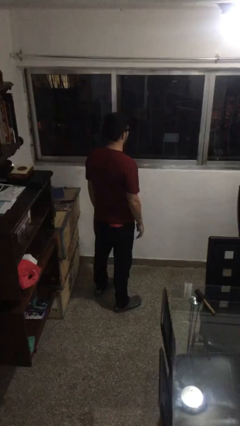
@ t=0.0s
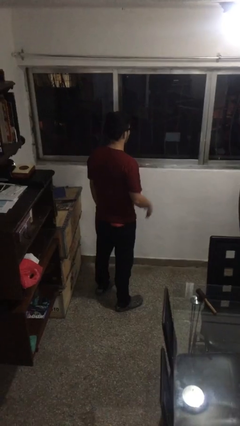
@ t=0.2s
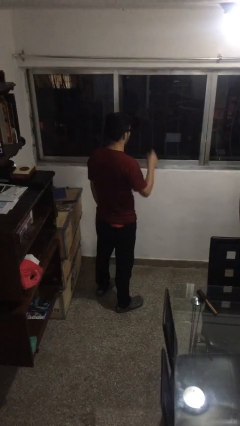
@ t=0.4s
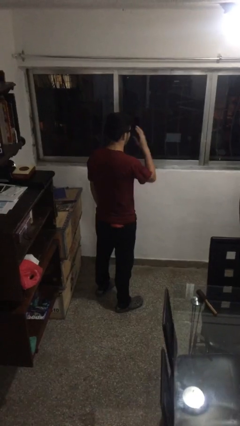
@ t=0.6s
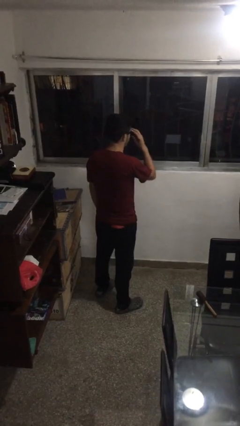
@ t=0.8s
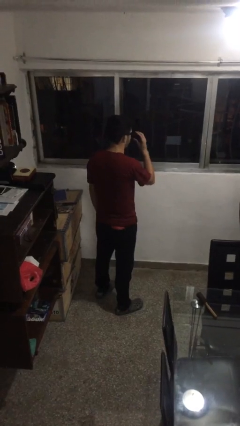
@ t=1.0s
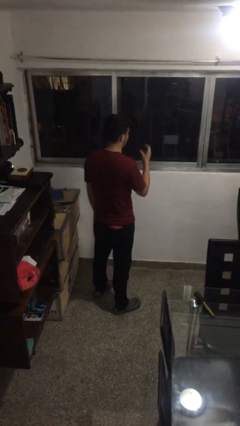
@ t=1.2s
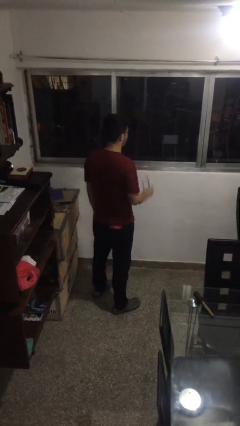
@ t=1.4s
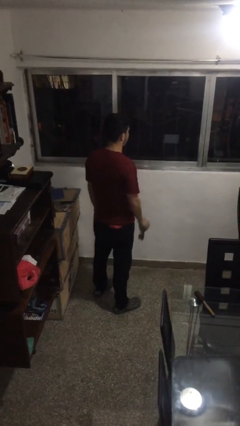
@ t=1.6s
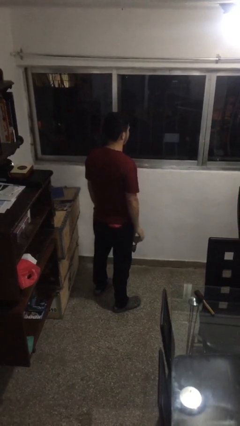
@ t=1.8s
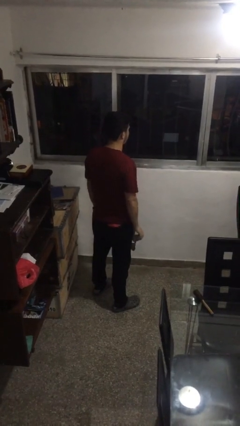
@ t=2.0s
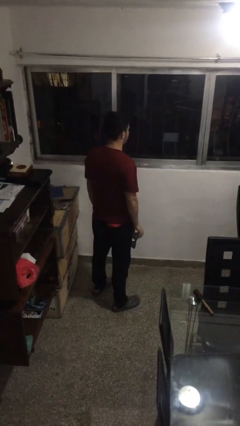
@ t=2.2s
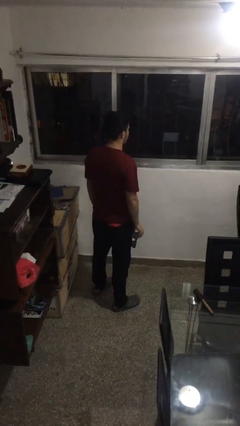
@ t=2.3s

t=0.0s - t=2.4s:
person takes off sunglasses

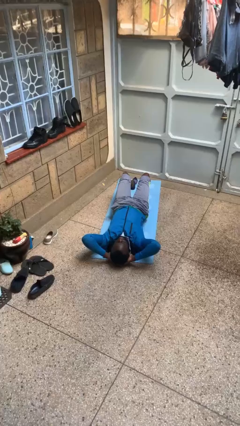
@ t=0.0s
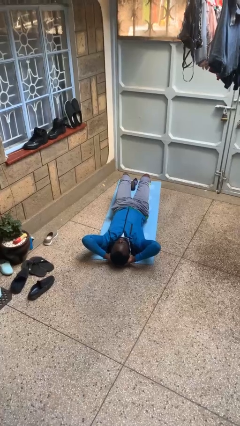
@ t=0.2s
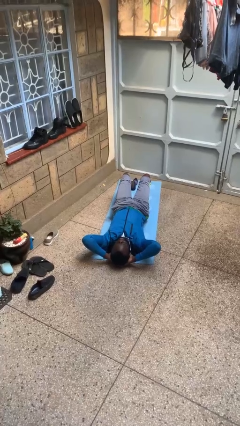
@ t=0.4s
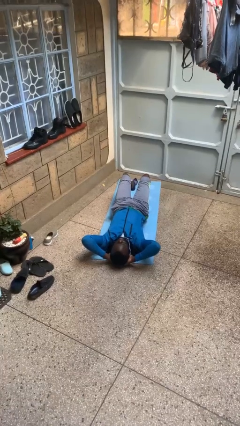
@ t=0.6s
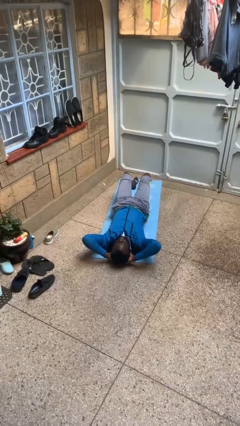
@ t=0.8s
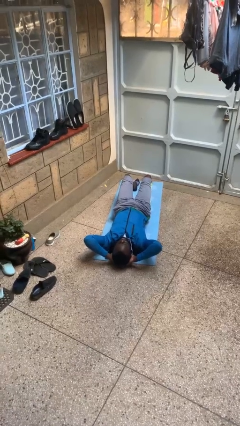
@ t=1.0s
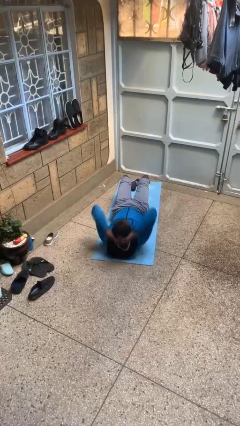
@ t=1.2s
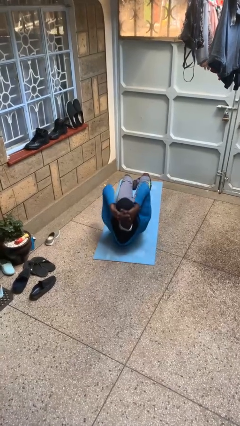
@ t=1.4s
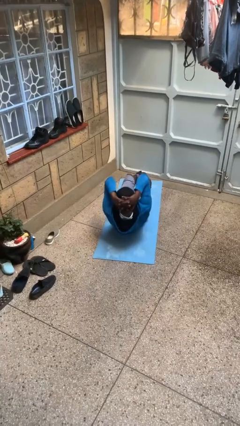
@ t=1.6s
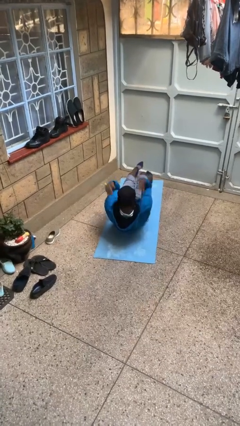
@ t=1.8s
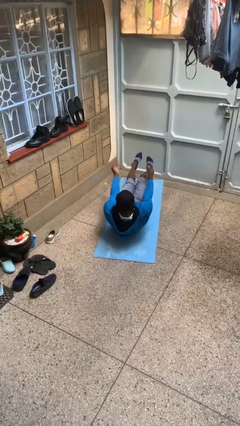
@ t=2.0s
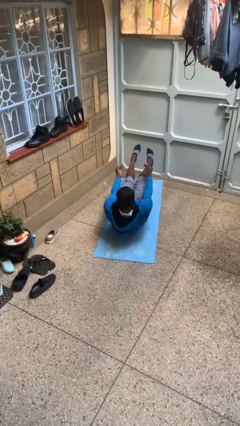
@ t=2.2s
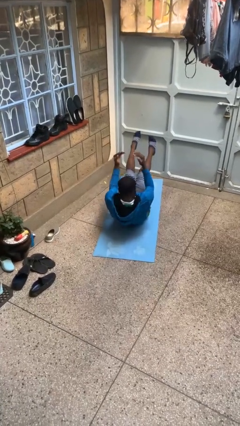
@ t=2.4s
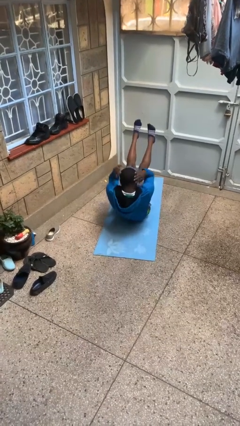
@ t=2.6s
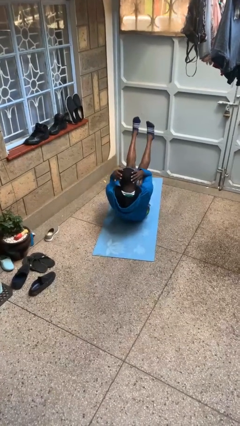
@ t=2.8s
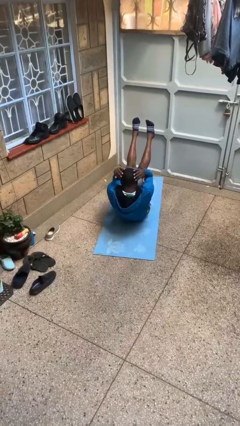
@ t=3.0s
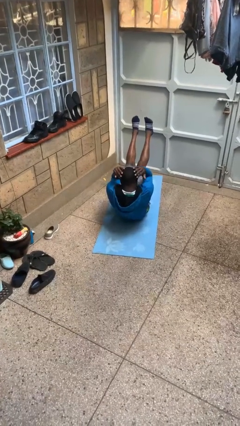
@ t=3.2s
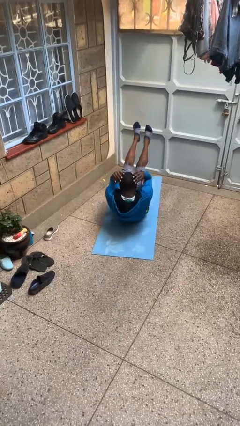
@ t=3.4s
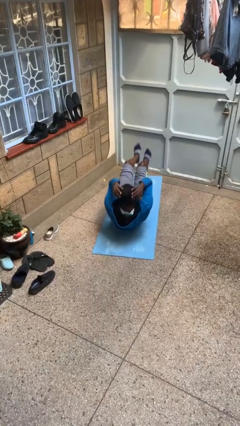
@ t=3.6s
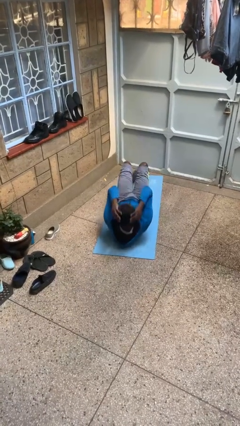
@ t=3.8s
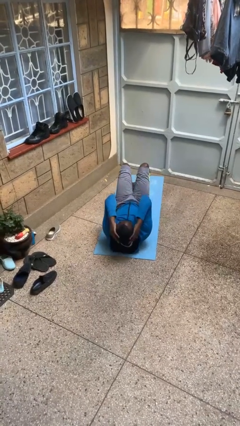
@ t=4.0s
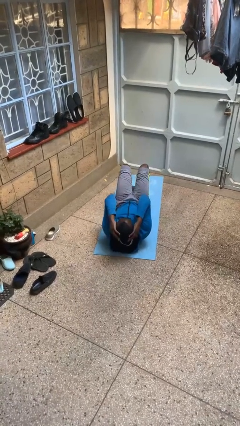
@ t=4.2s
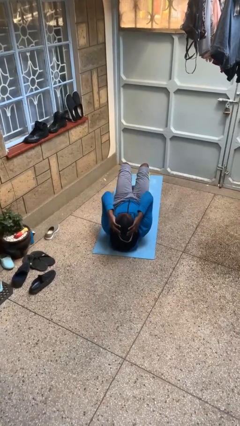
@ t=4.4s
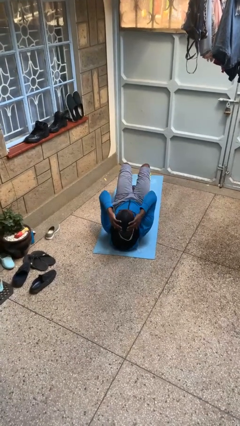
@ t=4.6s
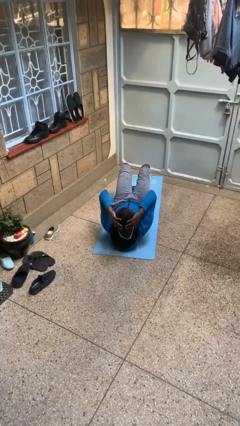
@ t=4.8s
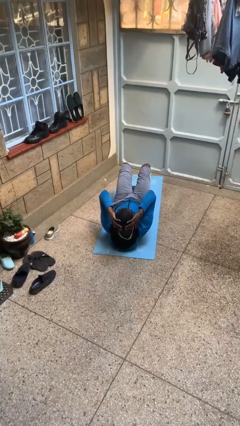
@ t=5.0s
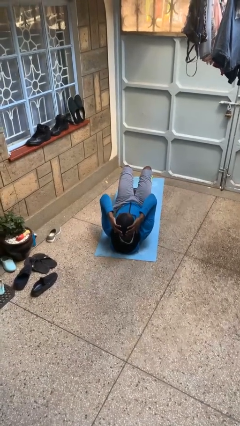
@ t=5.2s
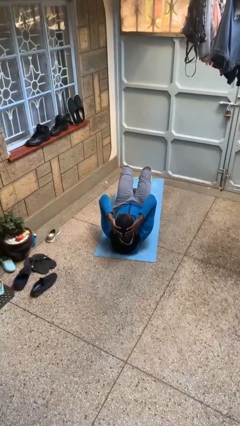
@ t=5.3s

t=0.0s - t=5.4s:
person exercises with situp

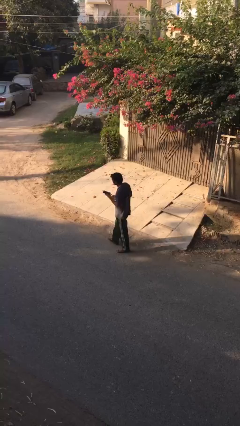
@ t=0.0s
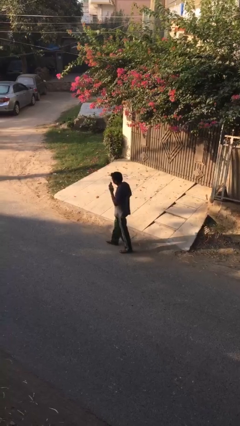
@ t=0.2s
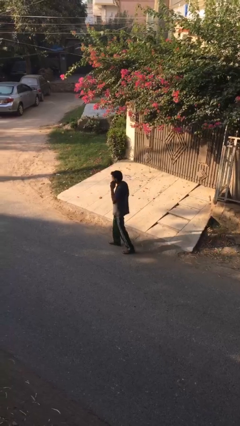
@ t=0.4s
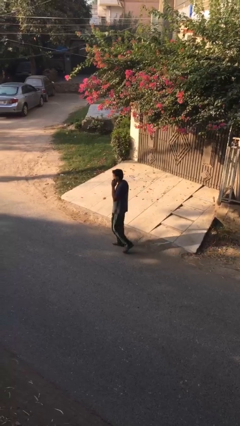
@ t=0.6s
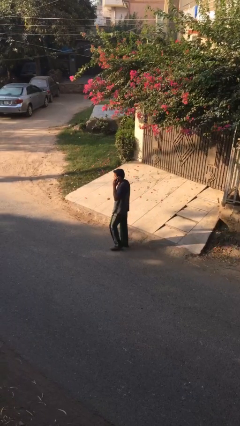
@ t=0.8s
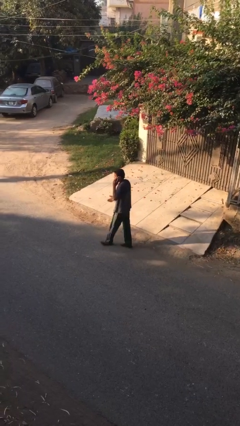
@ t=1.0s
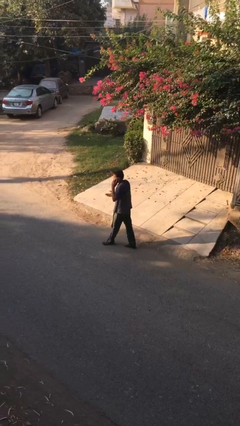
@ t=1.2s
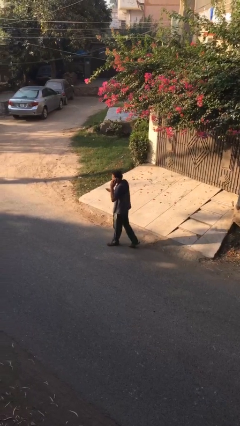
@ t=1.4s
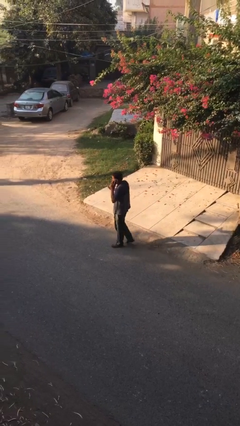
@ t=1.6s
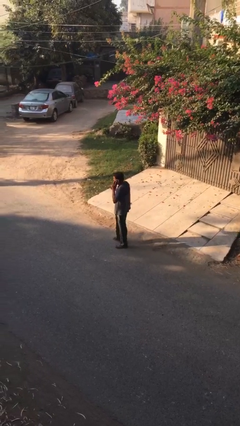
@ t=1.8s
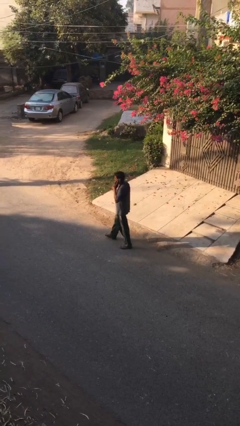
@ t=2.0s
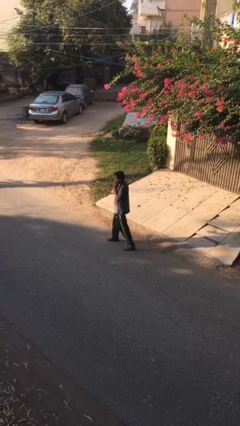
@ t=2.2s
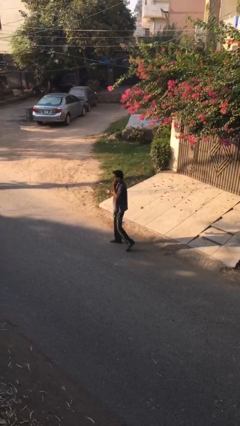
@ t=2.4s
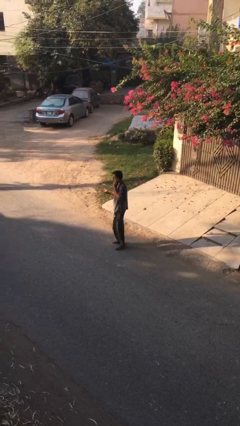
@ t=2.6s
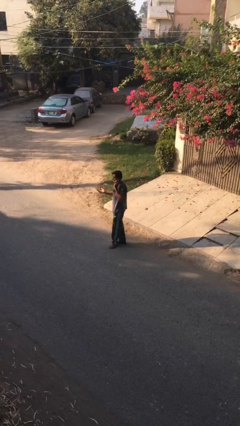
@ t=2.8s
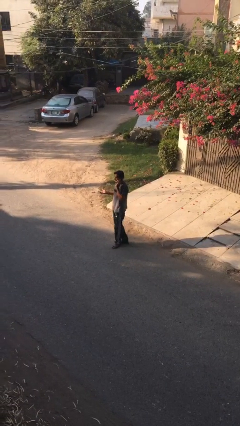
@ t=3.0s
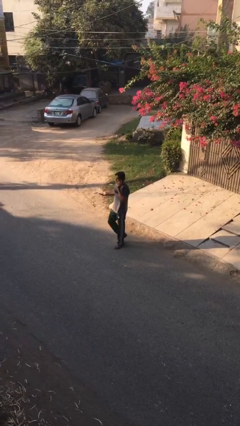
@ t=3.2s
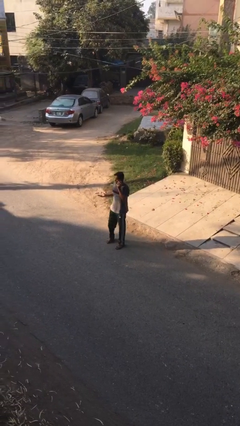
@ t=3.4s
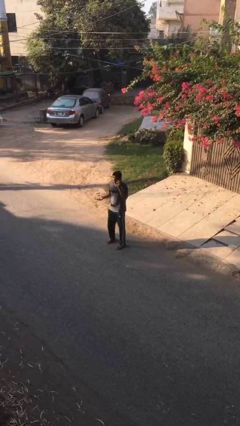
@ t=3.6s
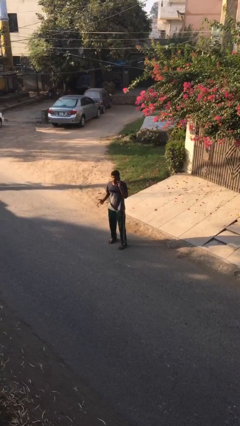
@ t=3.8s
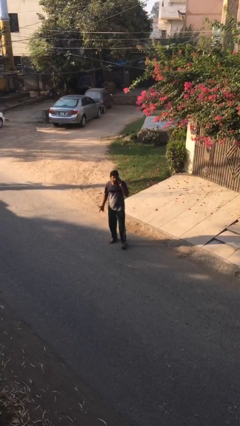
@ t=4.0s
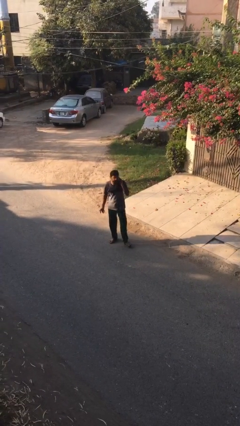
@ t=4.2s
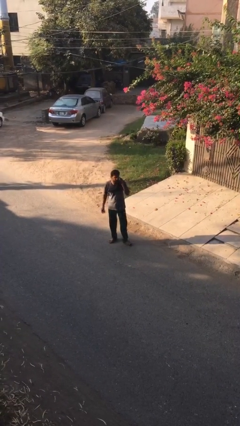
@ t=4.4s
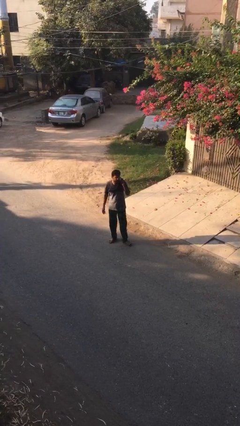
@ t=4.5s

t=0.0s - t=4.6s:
person talks on phone

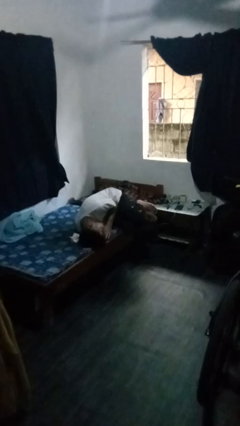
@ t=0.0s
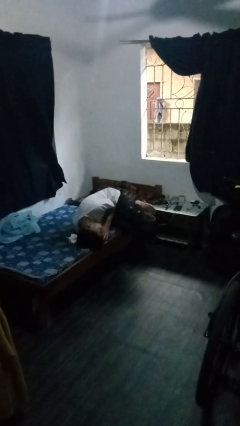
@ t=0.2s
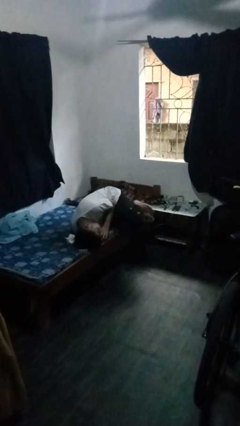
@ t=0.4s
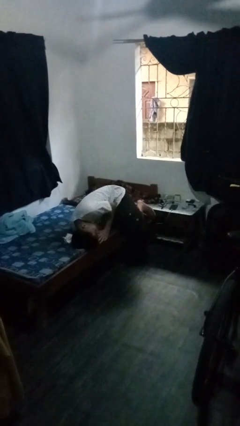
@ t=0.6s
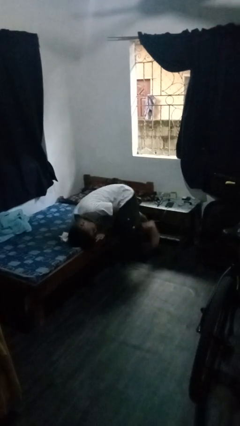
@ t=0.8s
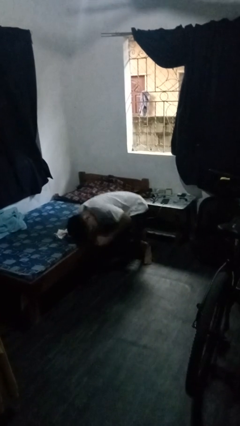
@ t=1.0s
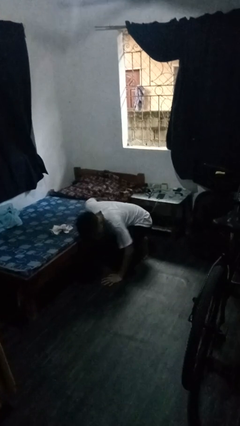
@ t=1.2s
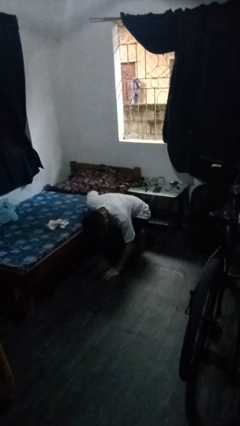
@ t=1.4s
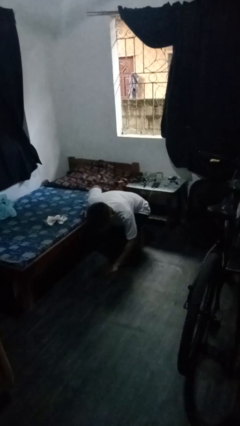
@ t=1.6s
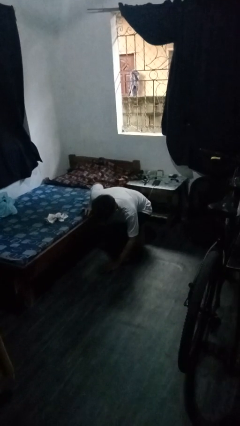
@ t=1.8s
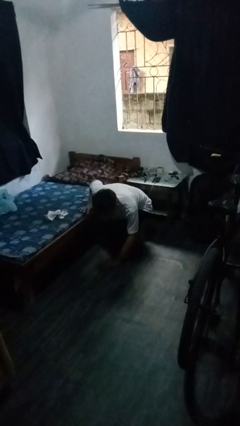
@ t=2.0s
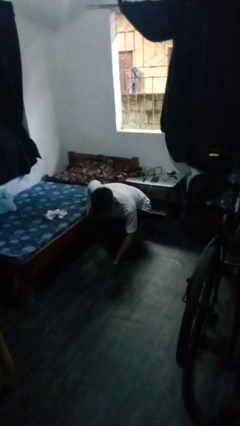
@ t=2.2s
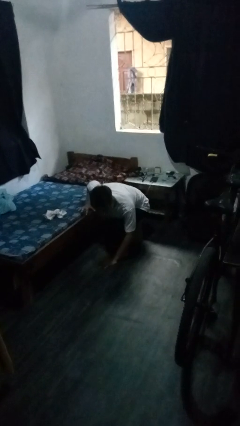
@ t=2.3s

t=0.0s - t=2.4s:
person falls from bed

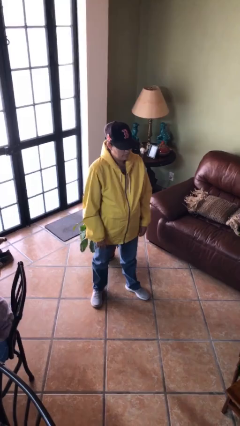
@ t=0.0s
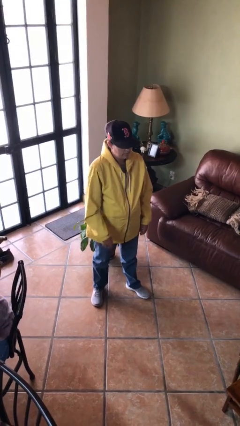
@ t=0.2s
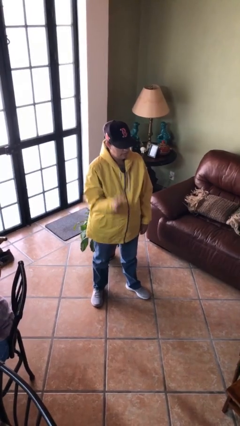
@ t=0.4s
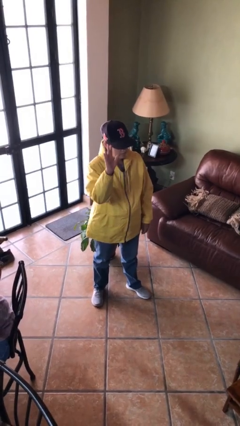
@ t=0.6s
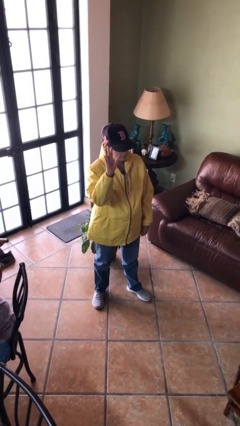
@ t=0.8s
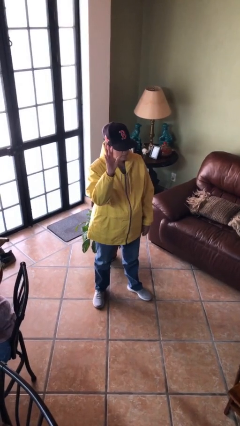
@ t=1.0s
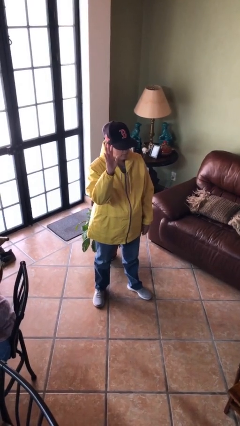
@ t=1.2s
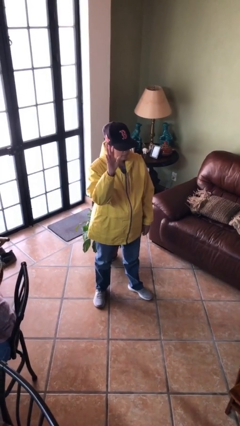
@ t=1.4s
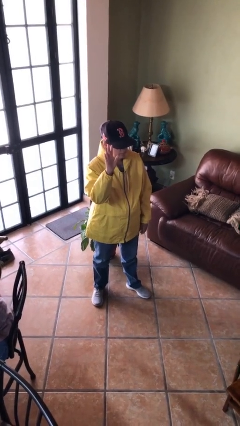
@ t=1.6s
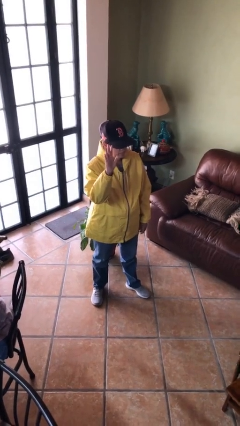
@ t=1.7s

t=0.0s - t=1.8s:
person gestures raise hand

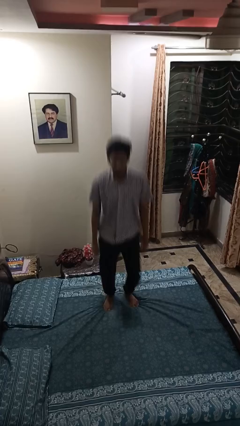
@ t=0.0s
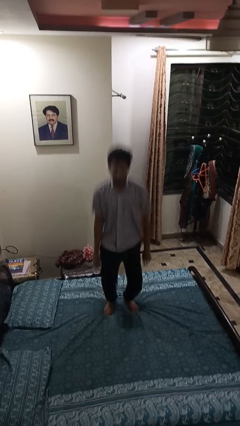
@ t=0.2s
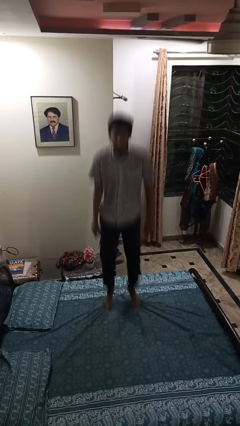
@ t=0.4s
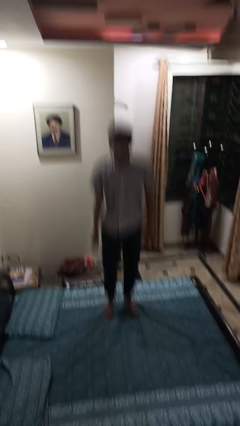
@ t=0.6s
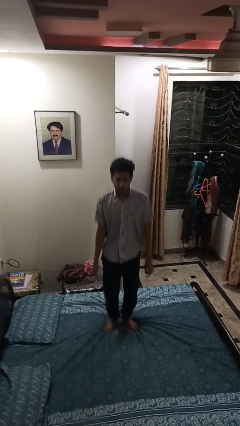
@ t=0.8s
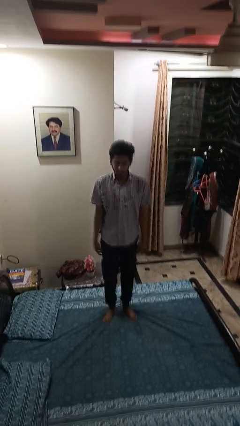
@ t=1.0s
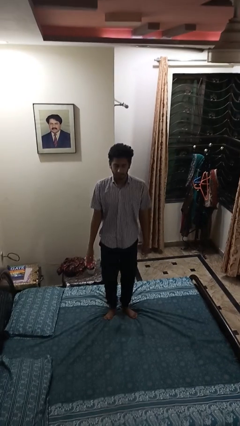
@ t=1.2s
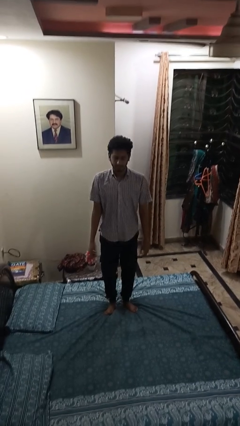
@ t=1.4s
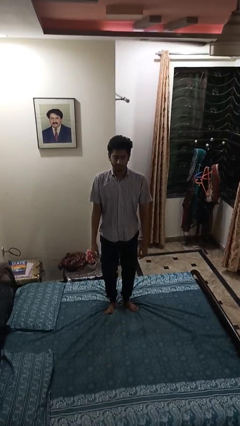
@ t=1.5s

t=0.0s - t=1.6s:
person jumps on bed
